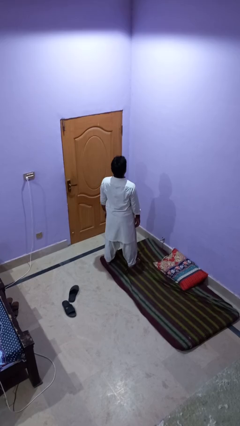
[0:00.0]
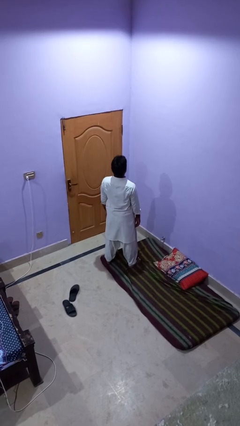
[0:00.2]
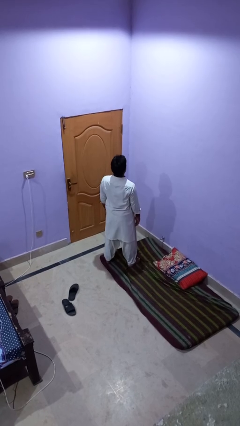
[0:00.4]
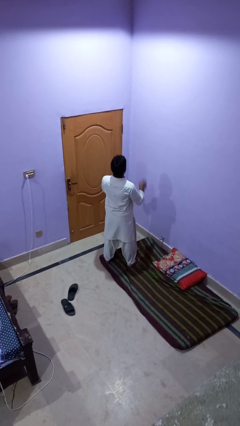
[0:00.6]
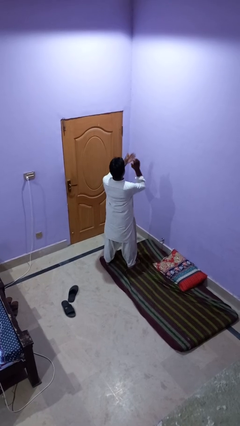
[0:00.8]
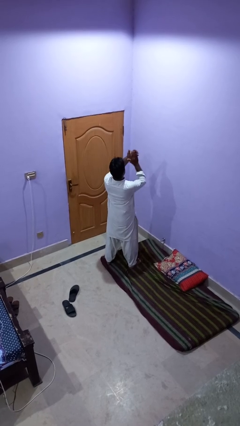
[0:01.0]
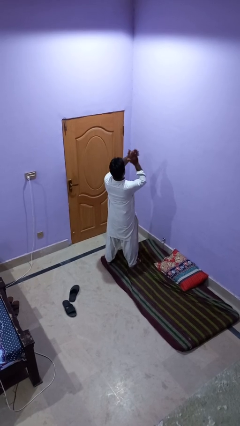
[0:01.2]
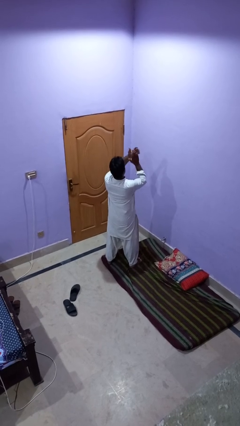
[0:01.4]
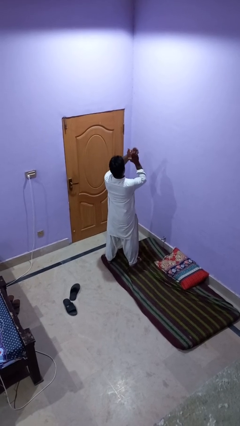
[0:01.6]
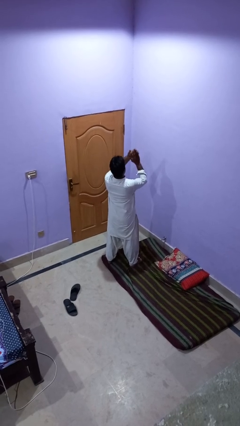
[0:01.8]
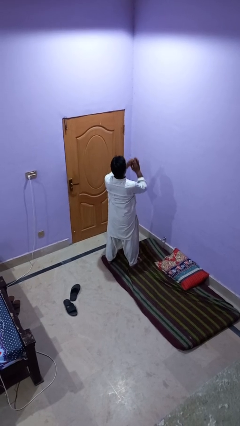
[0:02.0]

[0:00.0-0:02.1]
person claps hands

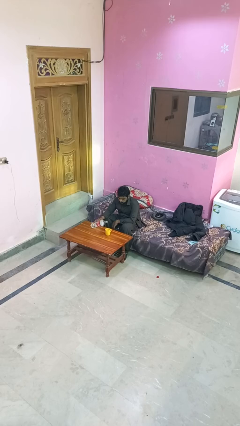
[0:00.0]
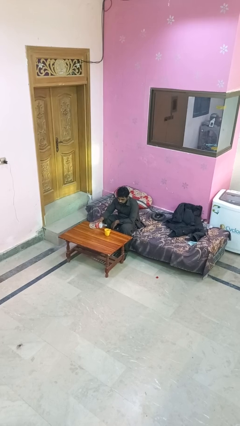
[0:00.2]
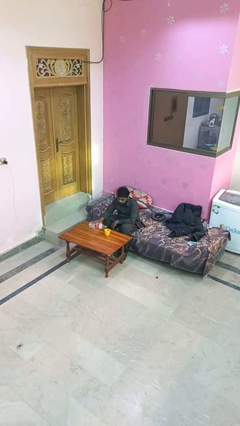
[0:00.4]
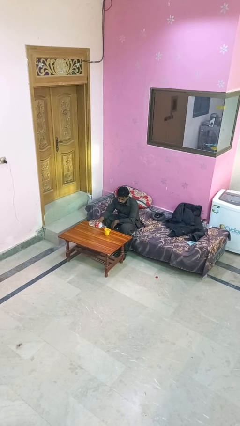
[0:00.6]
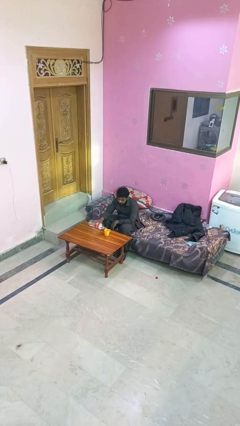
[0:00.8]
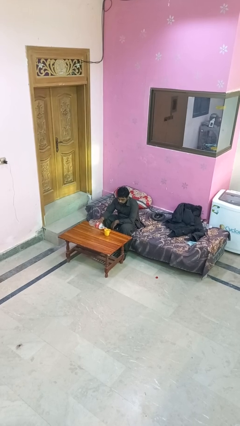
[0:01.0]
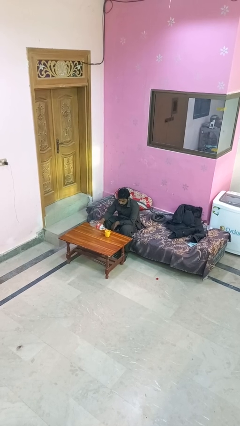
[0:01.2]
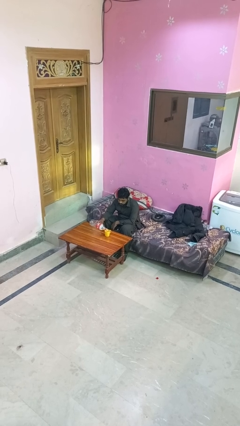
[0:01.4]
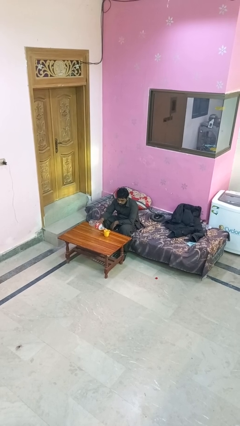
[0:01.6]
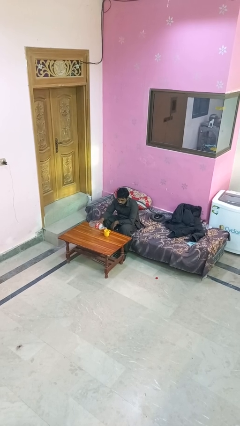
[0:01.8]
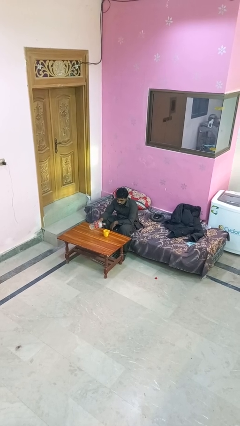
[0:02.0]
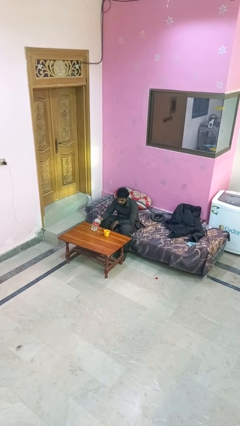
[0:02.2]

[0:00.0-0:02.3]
person pours liquid into cup

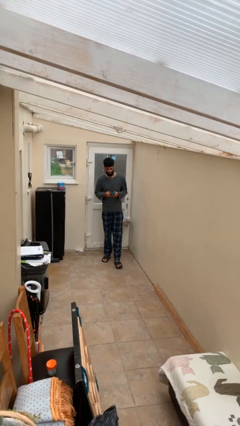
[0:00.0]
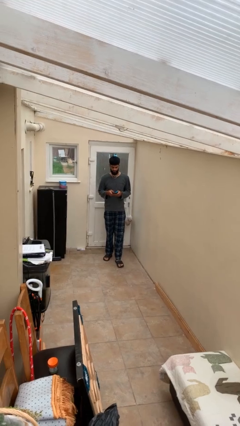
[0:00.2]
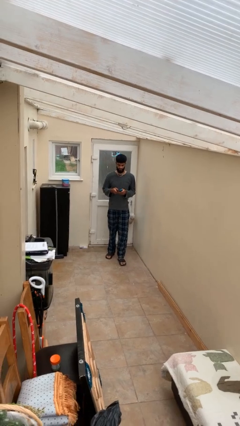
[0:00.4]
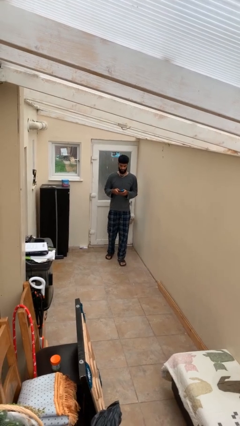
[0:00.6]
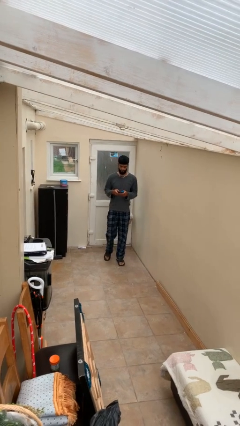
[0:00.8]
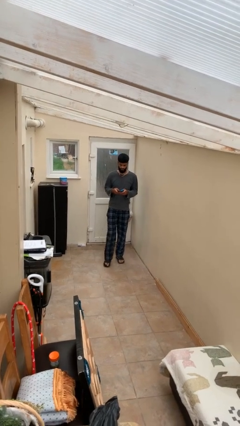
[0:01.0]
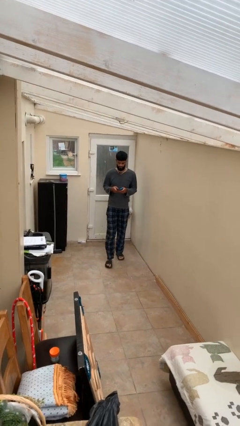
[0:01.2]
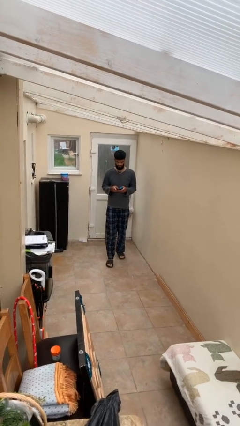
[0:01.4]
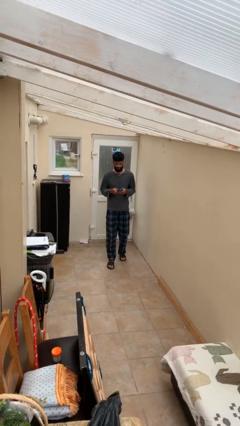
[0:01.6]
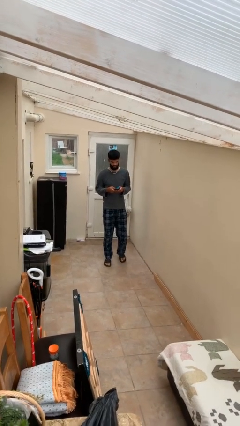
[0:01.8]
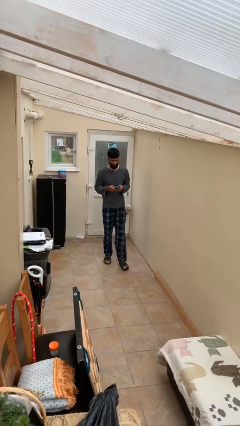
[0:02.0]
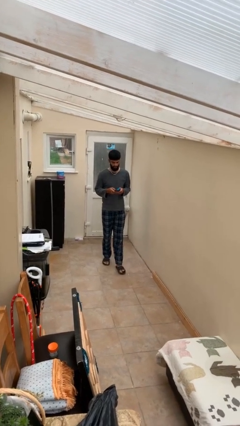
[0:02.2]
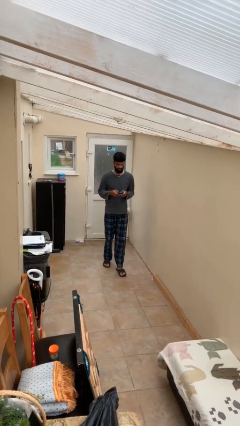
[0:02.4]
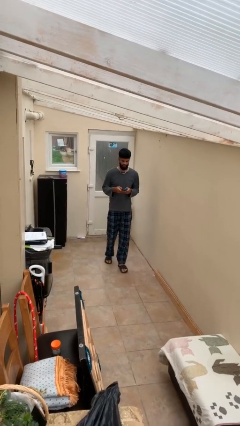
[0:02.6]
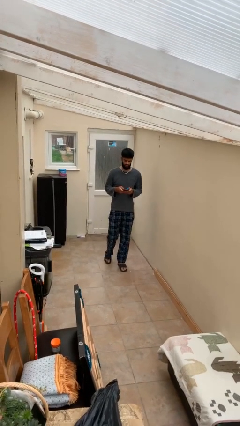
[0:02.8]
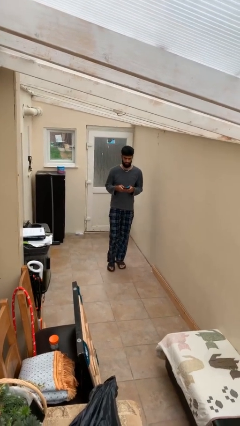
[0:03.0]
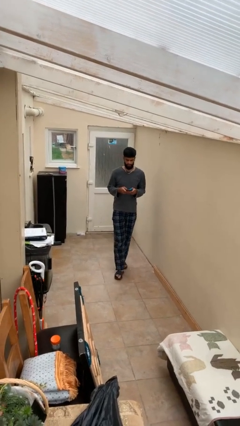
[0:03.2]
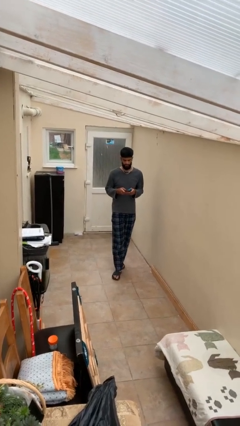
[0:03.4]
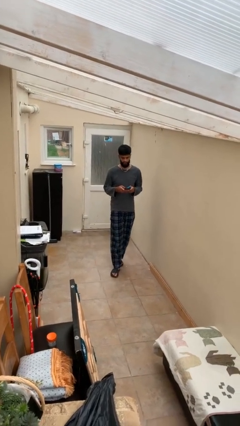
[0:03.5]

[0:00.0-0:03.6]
person texts on phone

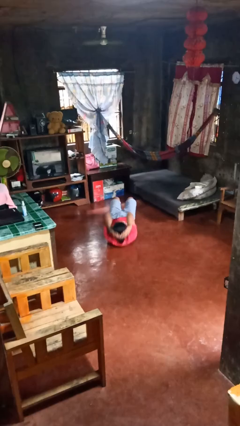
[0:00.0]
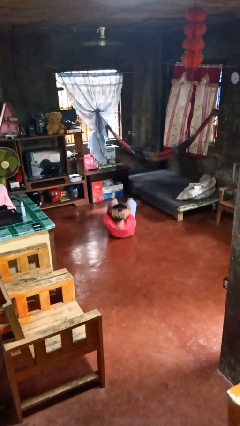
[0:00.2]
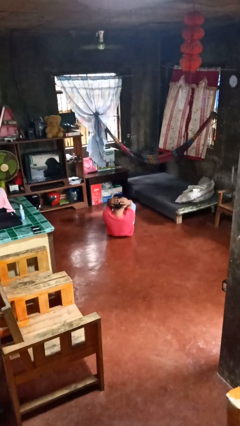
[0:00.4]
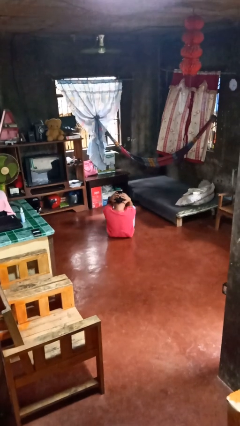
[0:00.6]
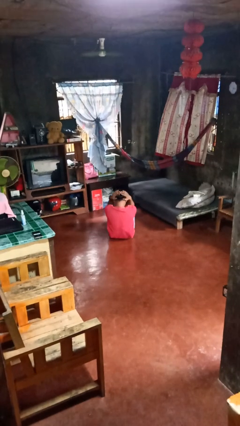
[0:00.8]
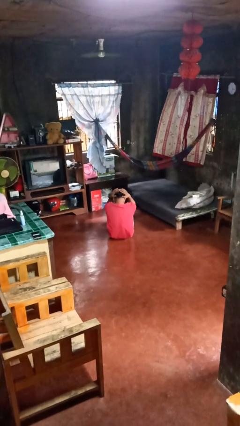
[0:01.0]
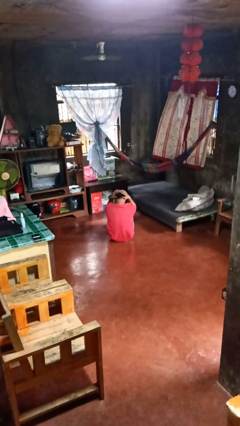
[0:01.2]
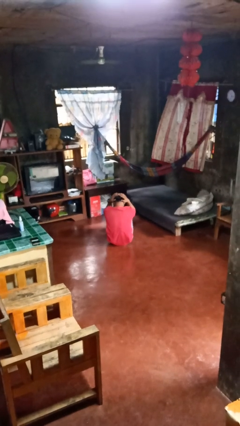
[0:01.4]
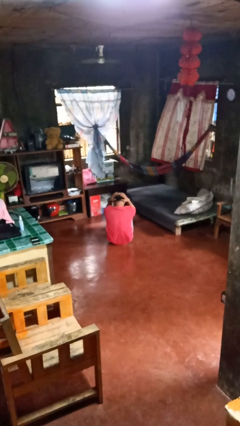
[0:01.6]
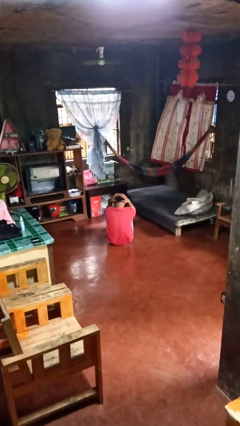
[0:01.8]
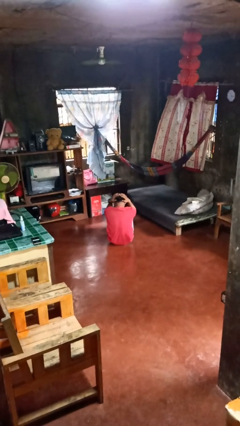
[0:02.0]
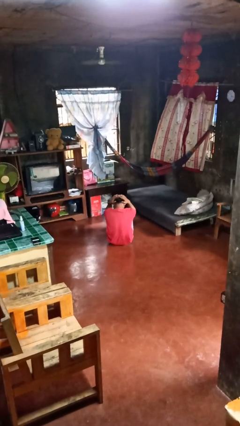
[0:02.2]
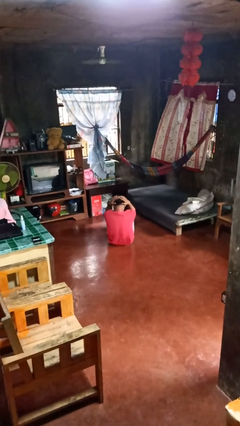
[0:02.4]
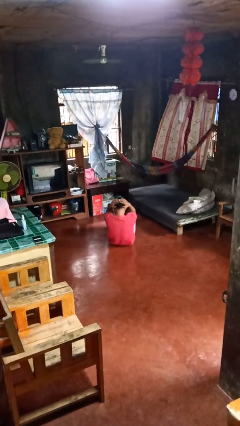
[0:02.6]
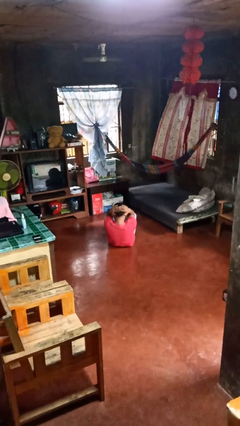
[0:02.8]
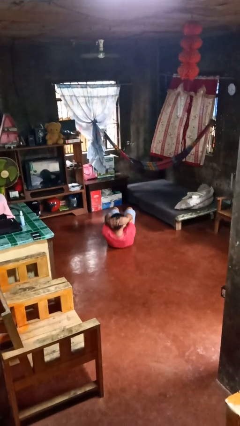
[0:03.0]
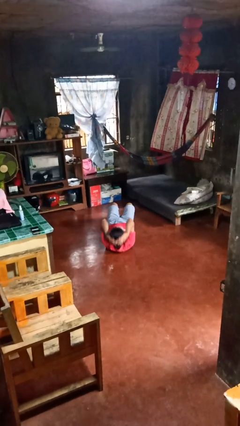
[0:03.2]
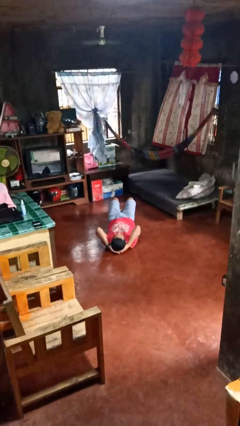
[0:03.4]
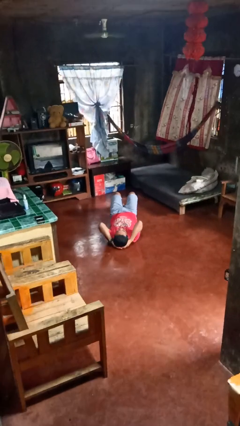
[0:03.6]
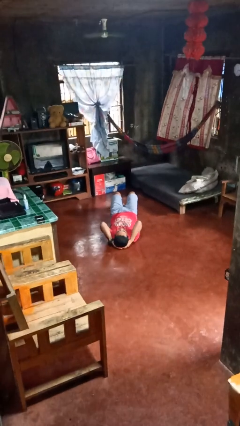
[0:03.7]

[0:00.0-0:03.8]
person exercises with situp

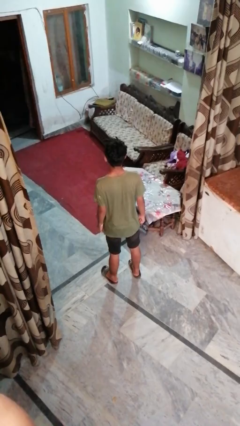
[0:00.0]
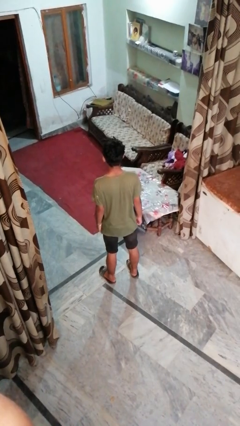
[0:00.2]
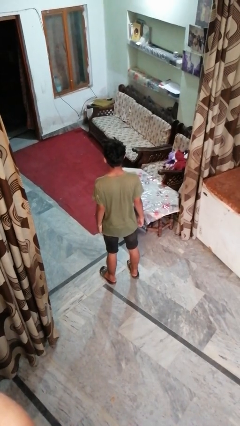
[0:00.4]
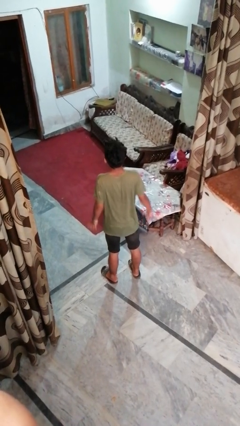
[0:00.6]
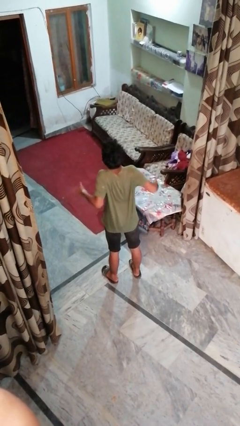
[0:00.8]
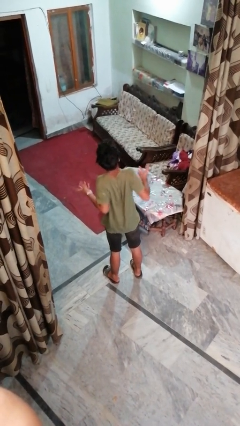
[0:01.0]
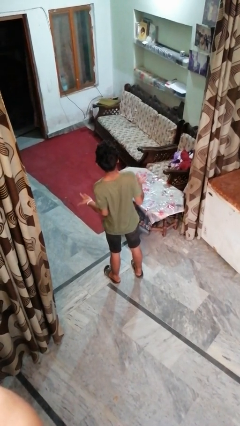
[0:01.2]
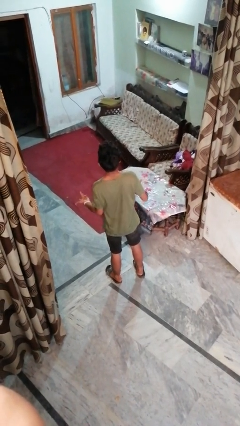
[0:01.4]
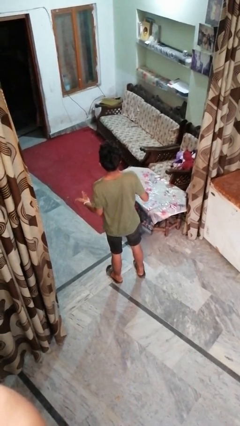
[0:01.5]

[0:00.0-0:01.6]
person shrugs

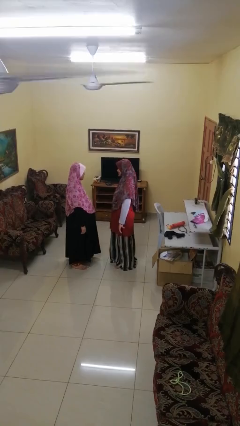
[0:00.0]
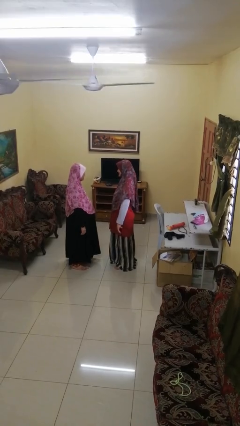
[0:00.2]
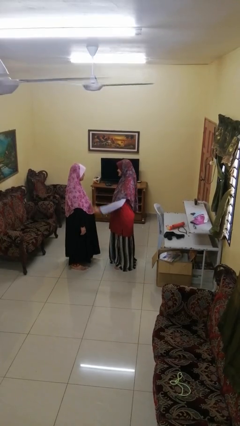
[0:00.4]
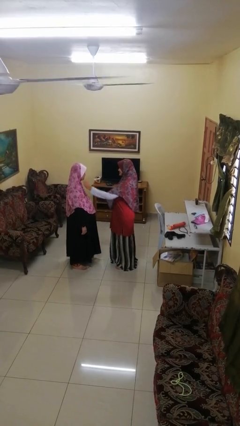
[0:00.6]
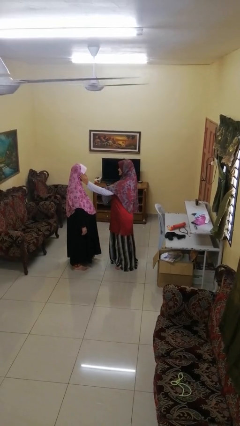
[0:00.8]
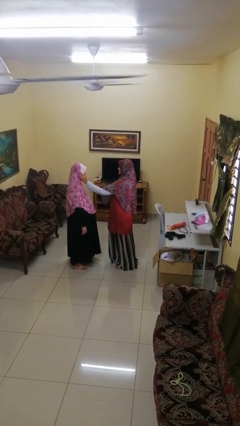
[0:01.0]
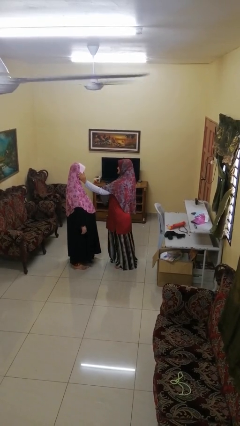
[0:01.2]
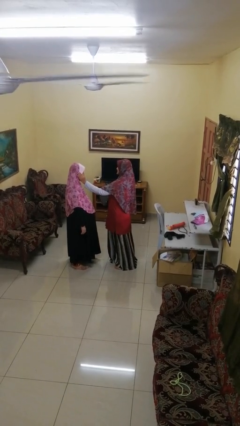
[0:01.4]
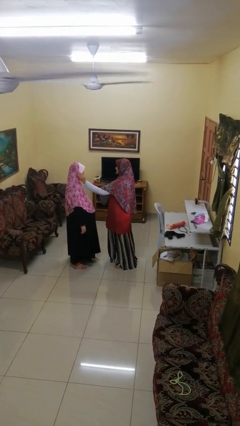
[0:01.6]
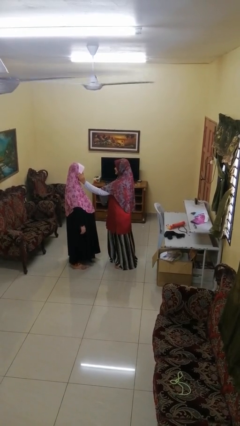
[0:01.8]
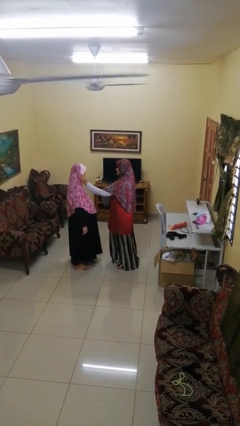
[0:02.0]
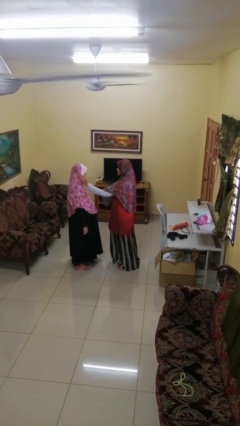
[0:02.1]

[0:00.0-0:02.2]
person touches face of person

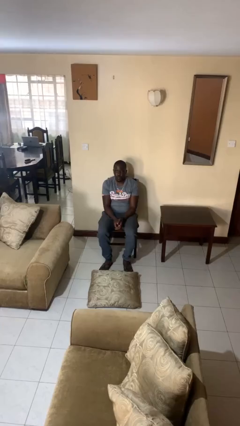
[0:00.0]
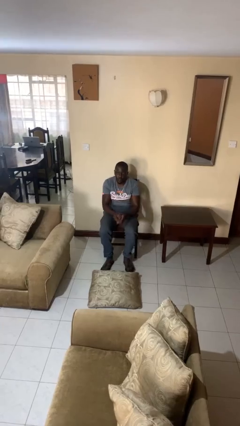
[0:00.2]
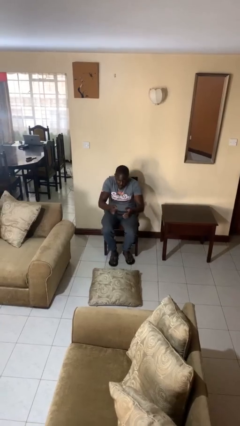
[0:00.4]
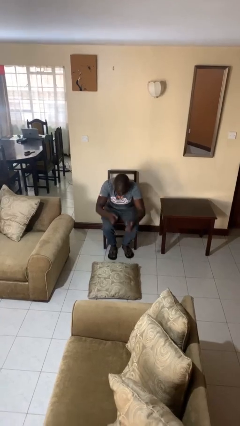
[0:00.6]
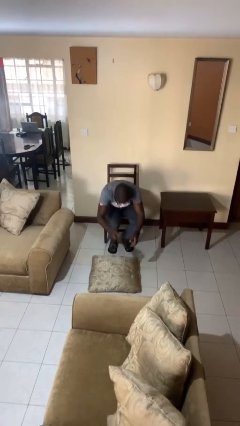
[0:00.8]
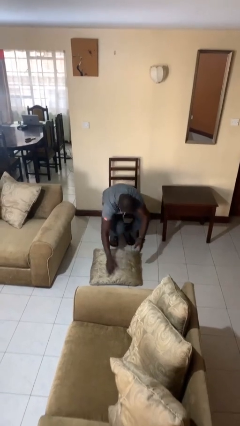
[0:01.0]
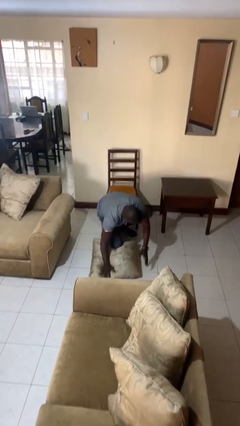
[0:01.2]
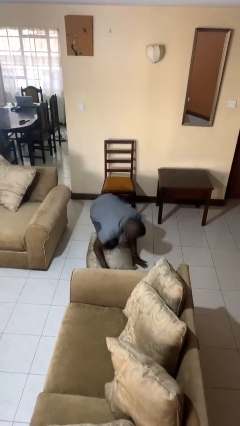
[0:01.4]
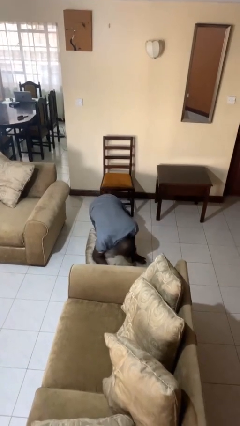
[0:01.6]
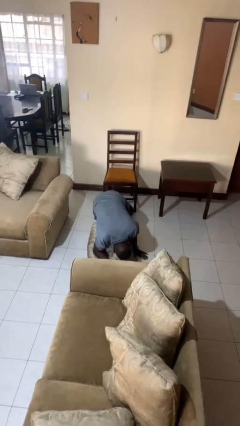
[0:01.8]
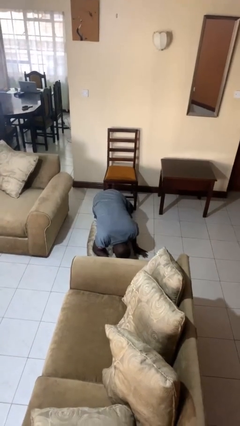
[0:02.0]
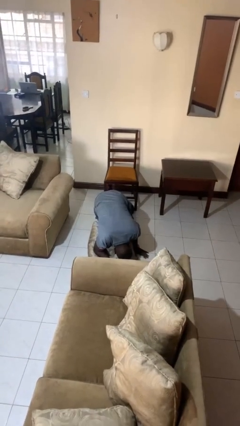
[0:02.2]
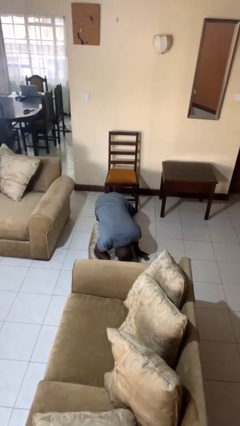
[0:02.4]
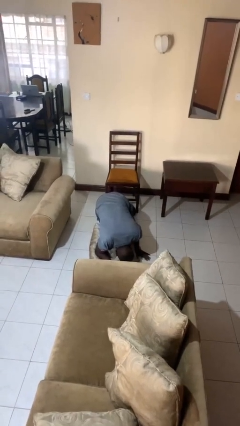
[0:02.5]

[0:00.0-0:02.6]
person falls from chair
